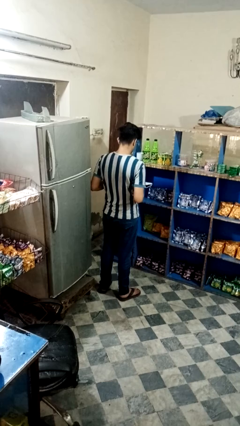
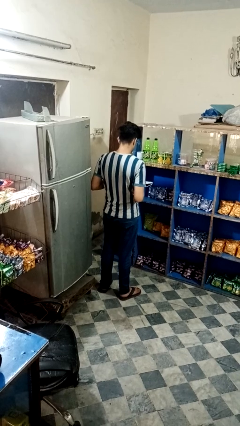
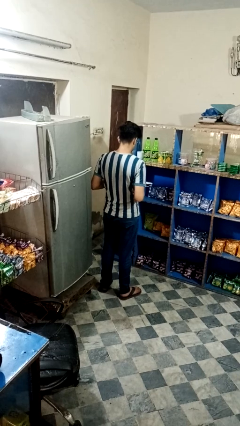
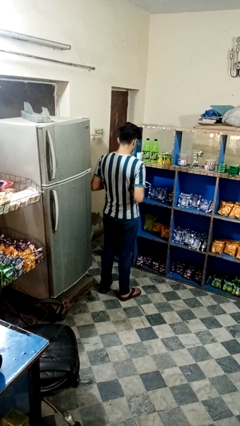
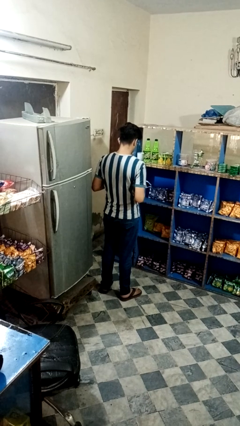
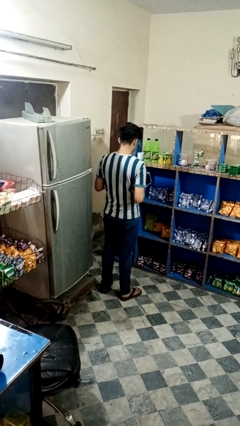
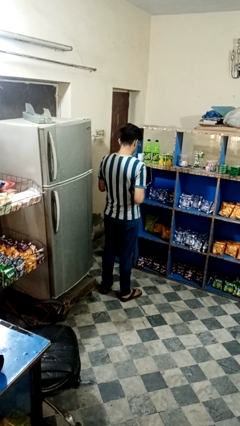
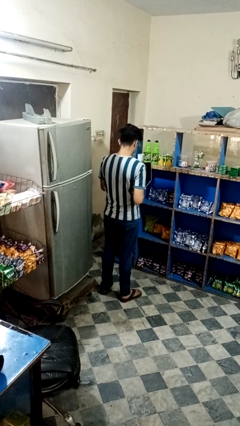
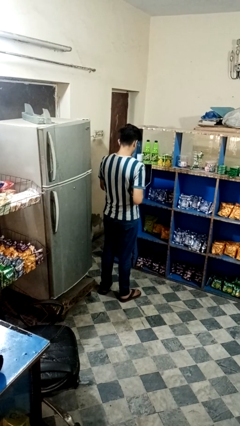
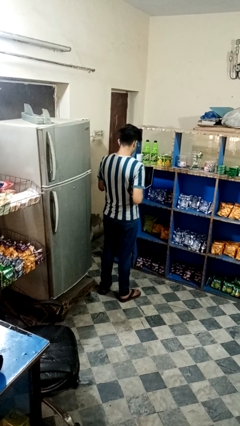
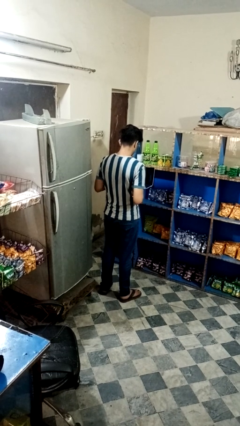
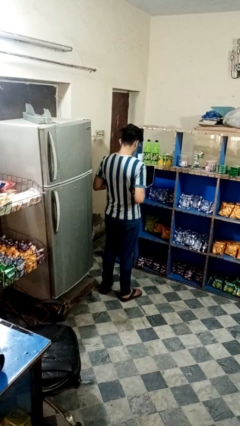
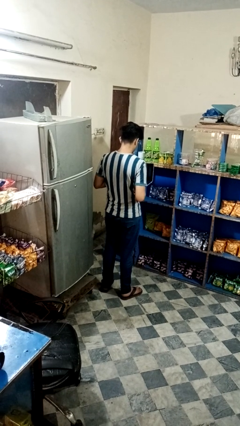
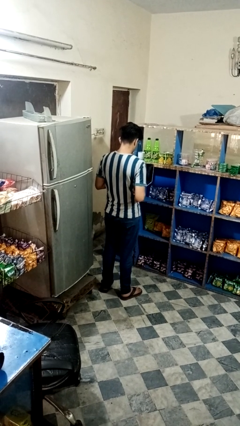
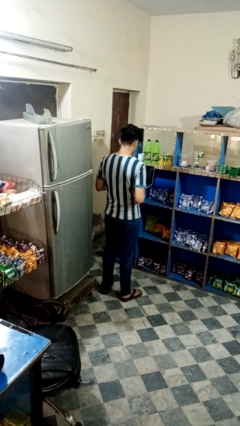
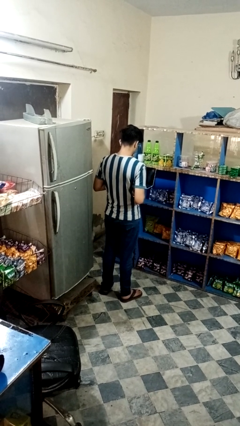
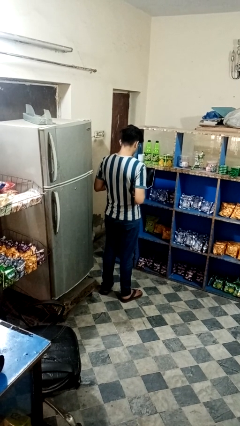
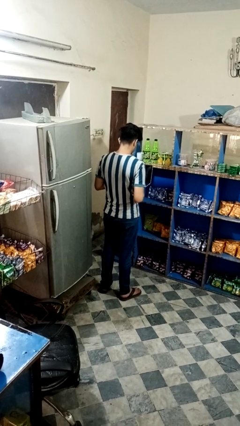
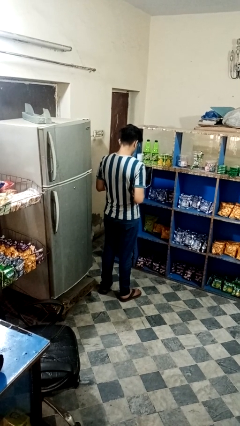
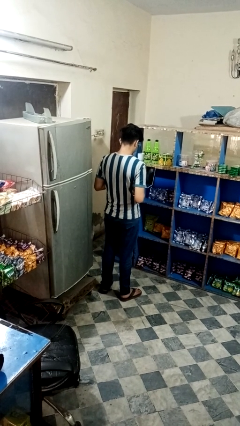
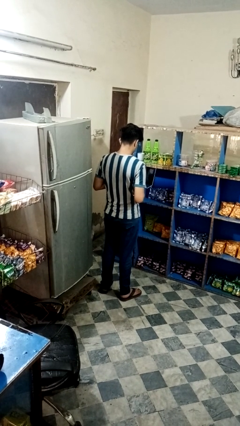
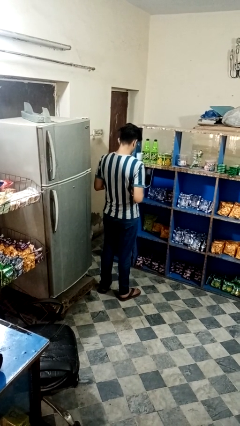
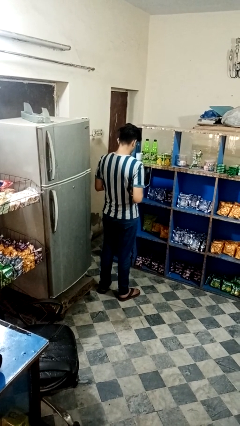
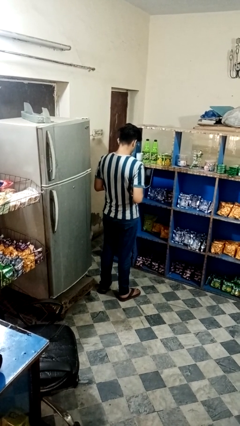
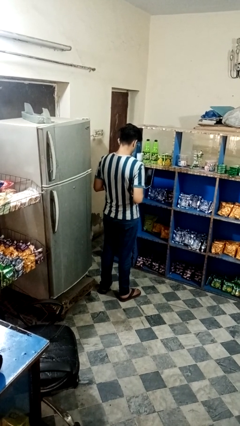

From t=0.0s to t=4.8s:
person opens laptop

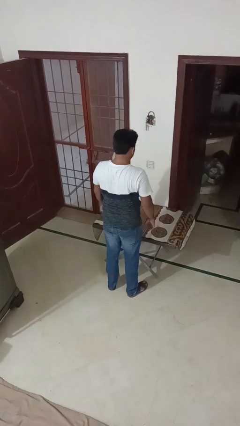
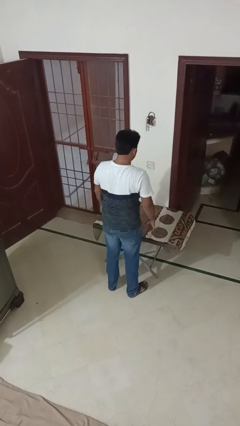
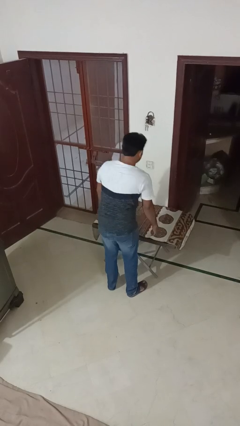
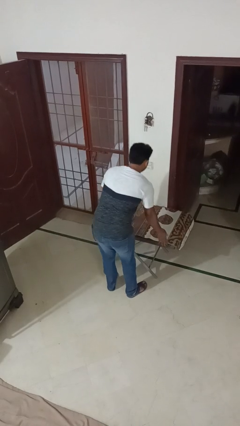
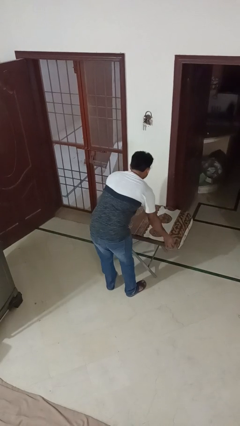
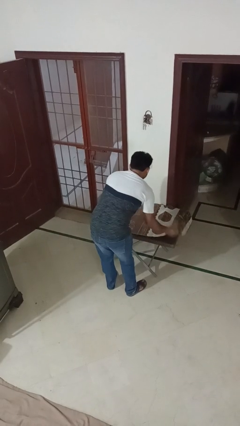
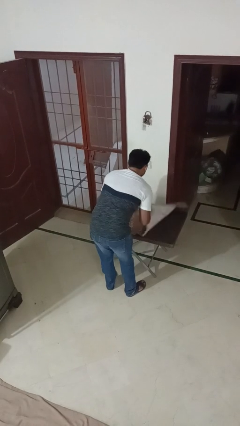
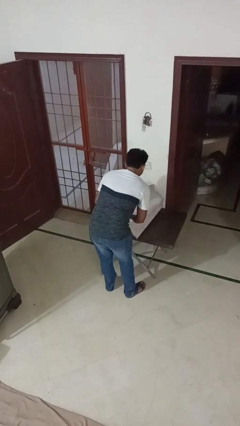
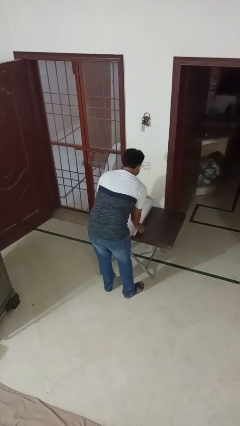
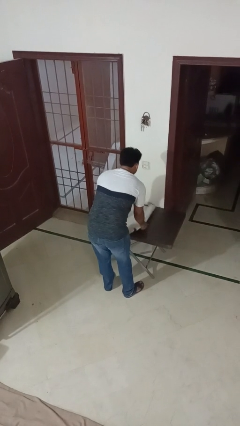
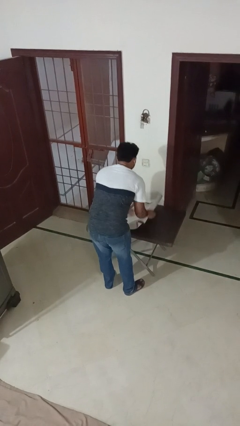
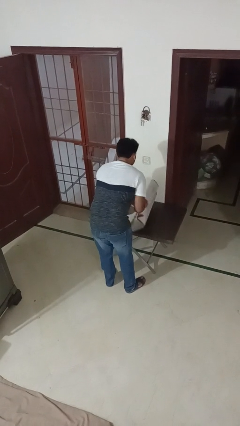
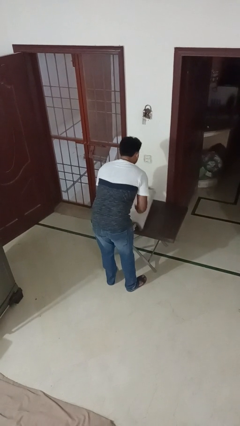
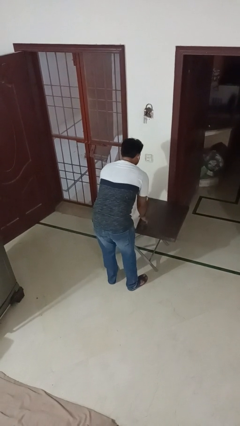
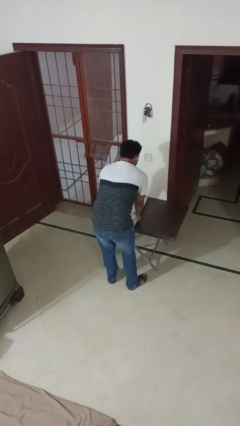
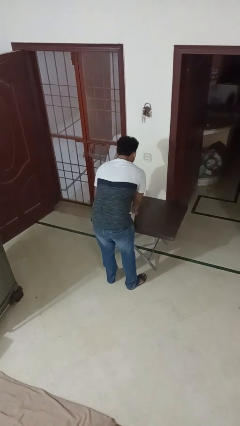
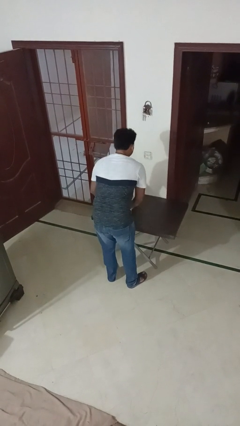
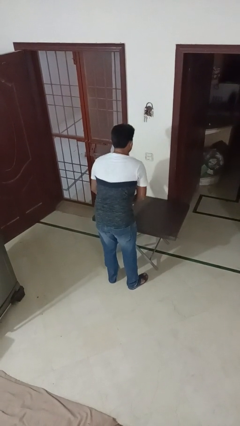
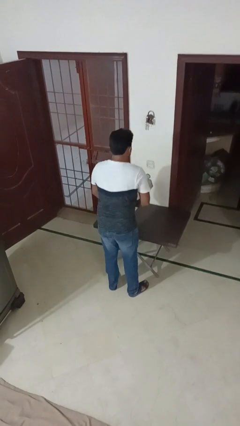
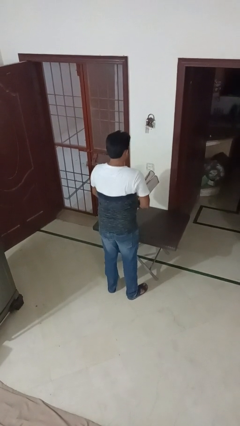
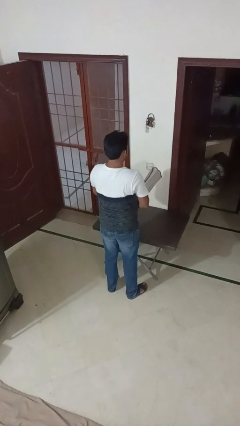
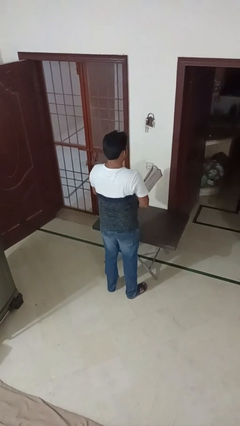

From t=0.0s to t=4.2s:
person folds tablecloth

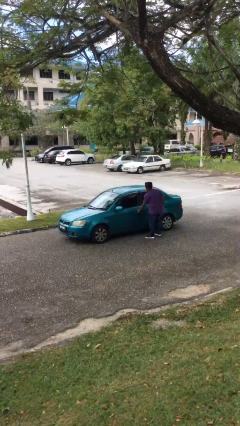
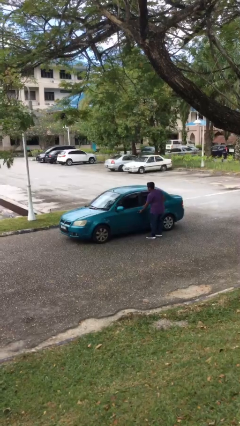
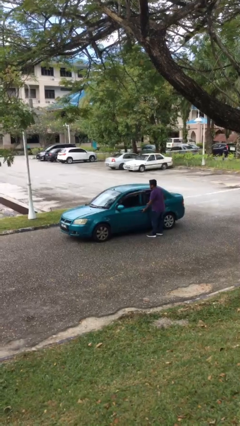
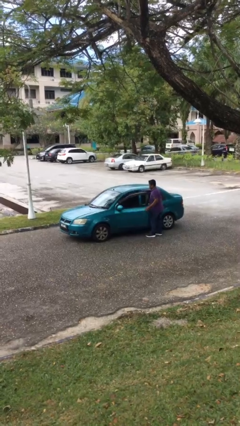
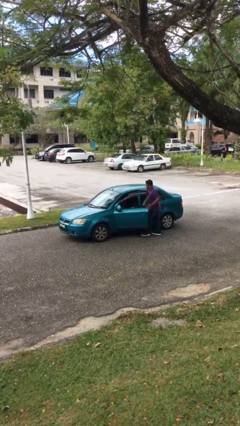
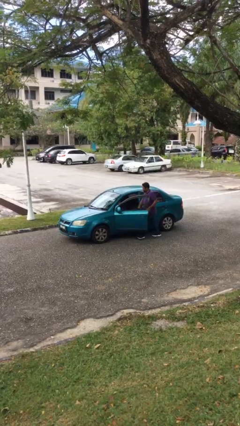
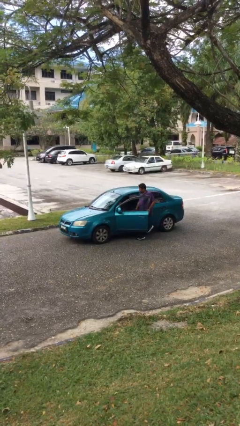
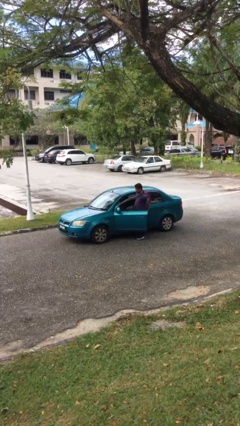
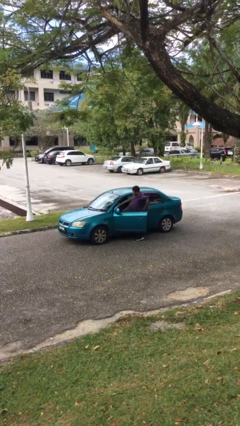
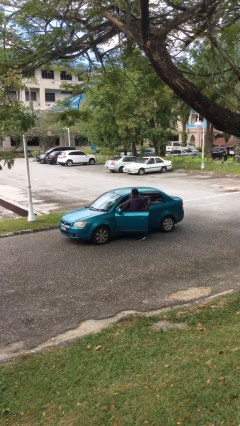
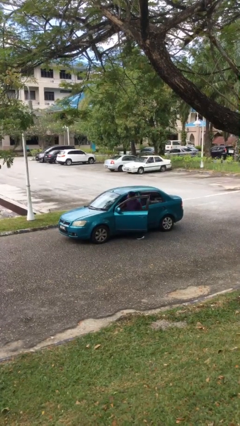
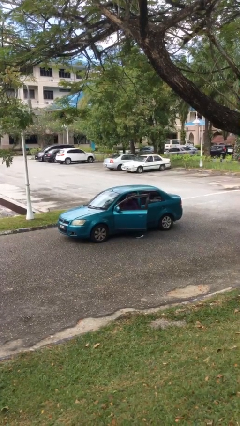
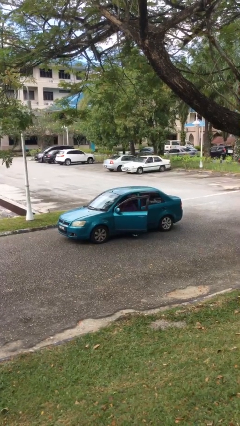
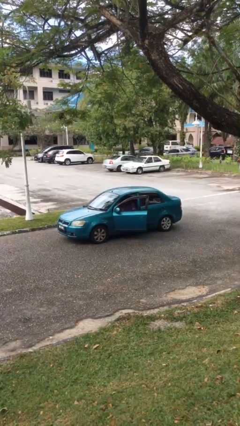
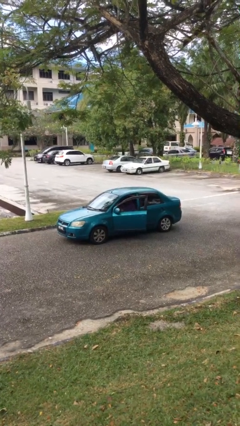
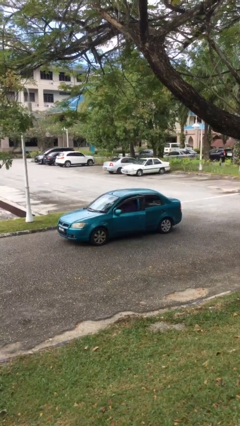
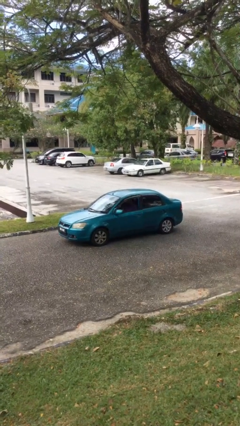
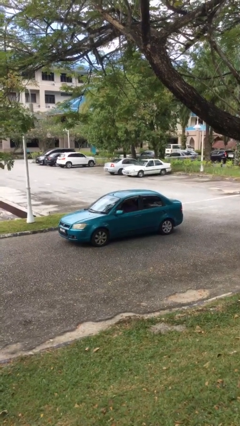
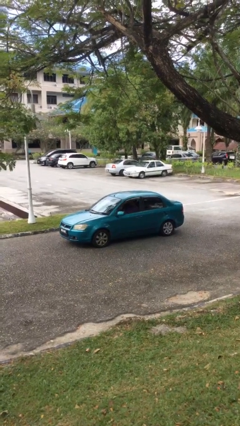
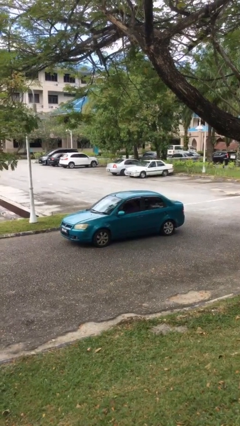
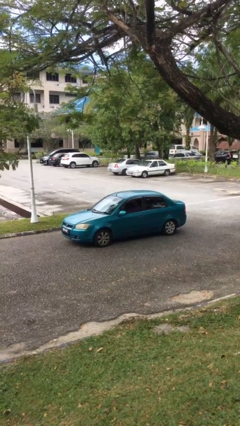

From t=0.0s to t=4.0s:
car picks up person

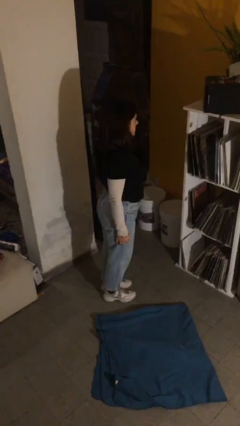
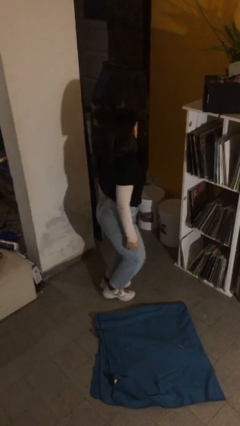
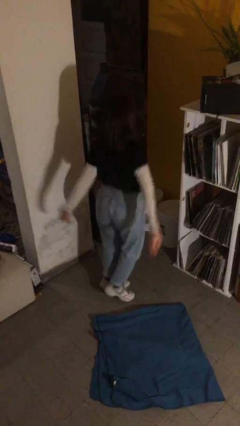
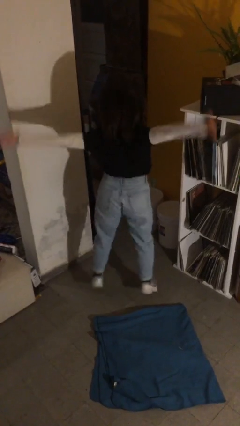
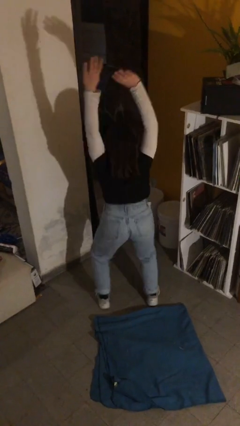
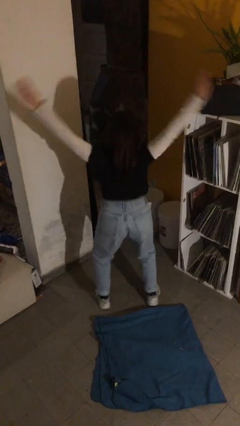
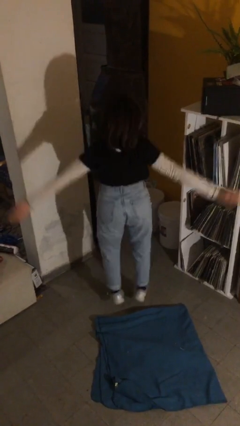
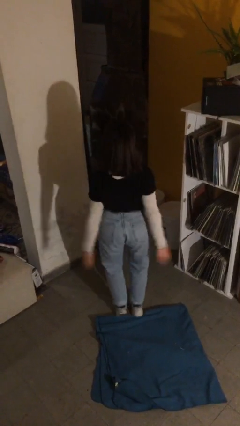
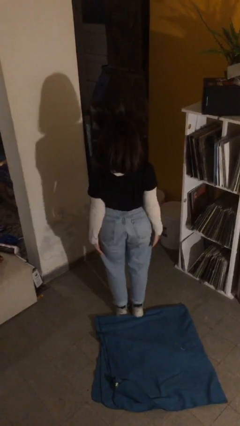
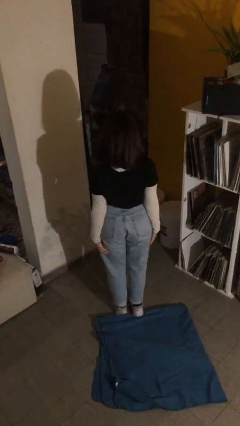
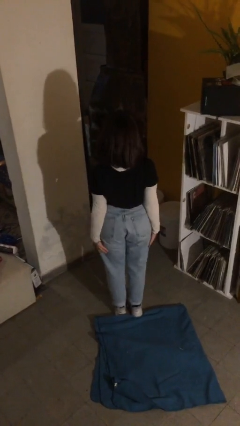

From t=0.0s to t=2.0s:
person exercises with jumping jacks

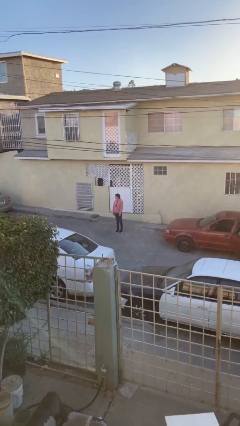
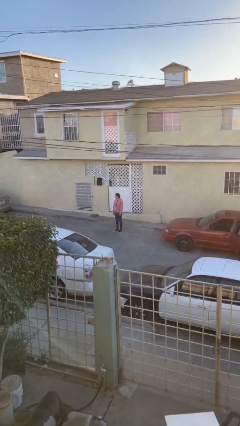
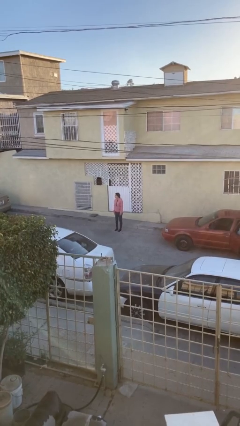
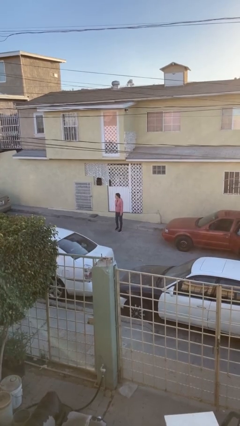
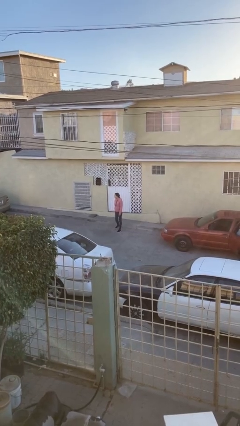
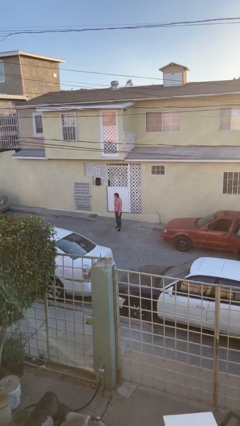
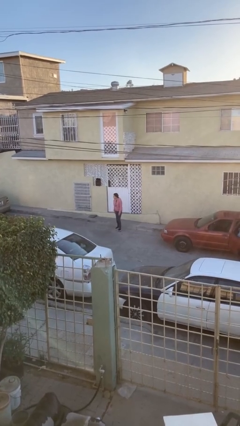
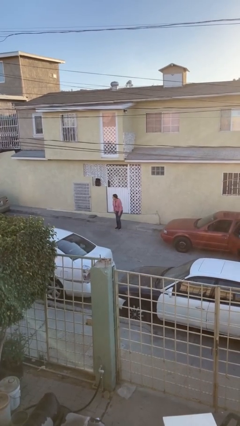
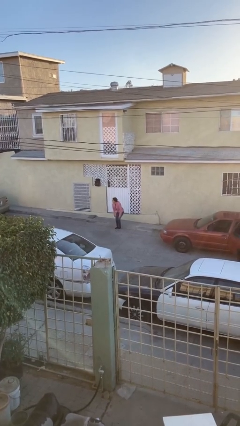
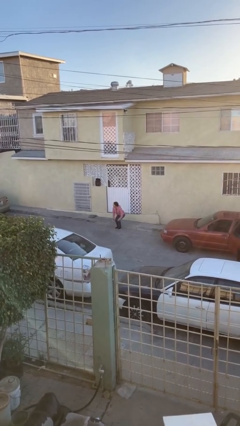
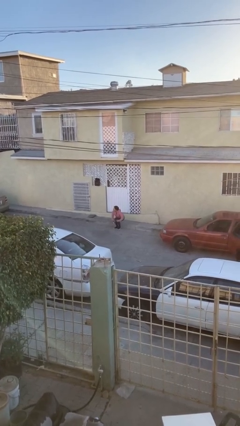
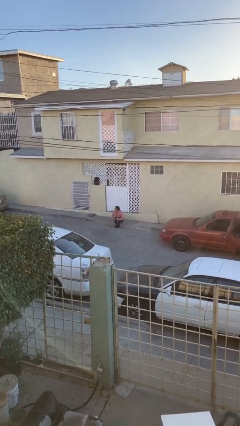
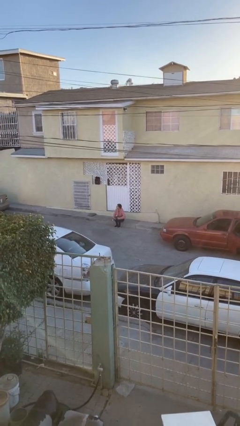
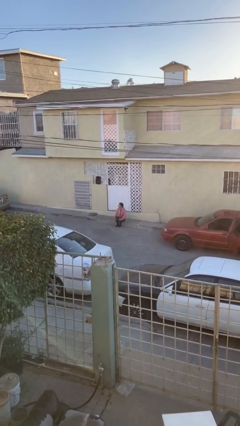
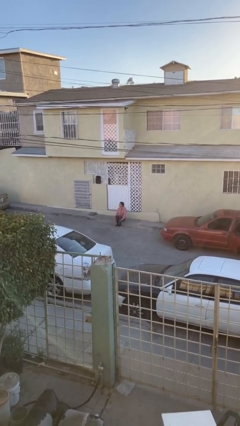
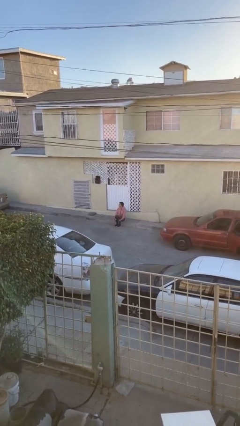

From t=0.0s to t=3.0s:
person sits down
